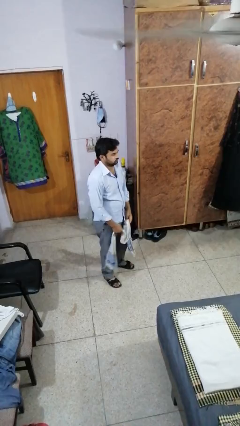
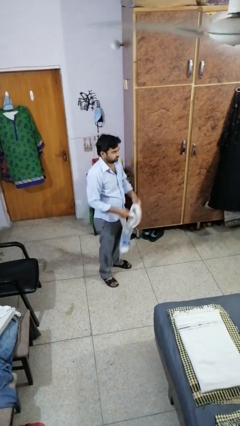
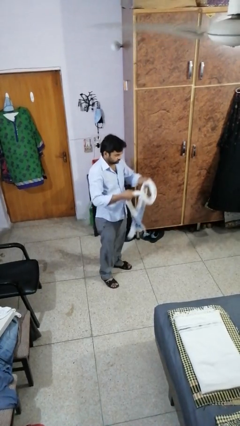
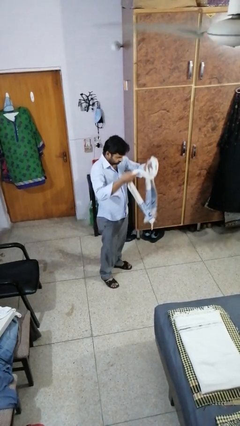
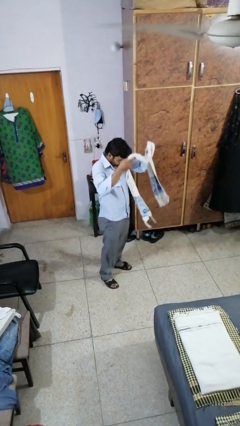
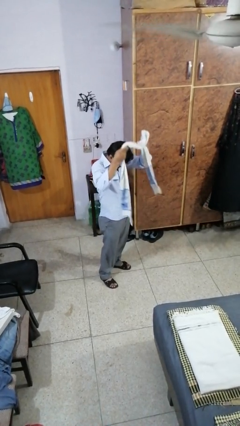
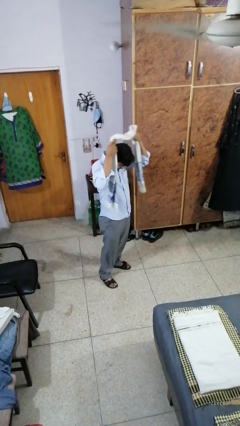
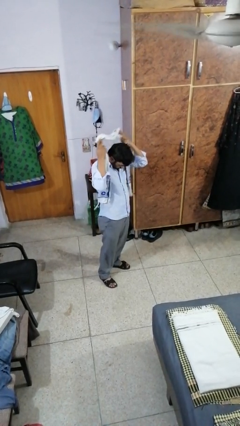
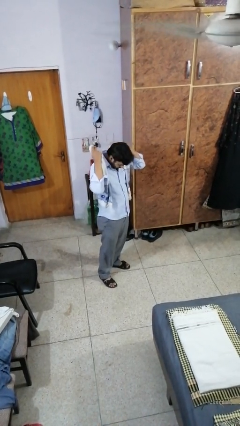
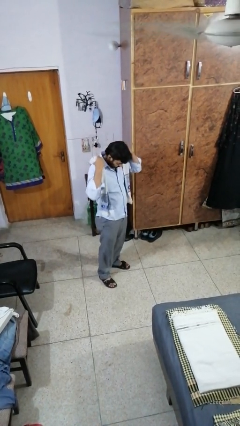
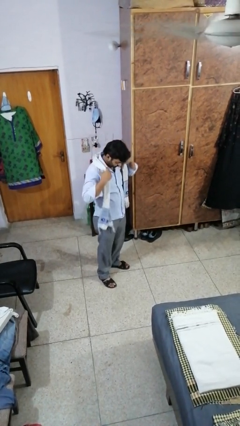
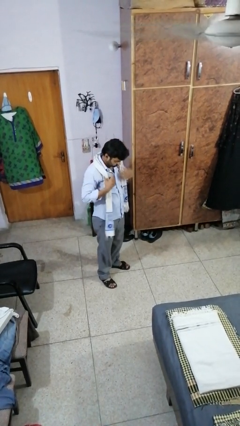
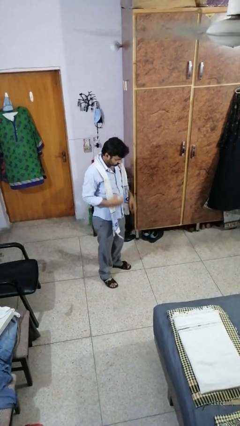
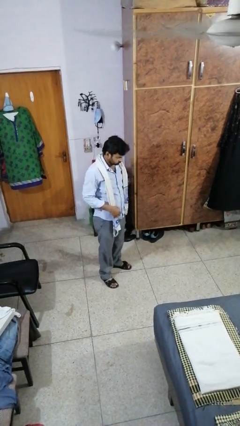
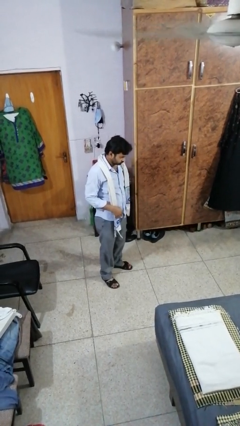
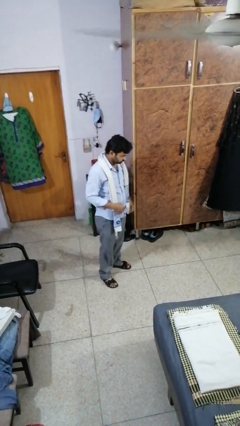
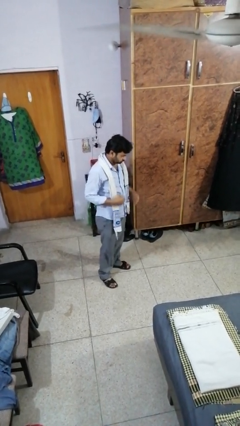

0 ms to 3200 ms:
person puts on scarf

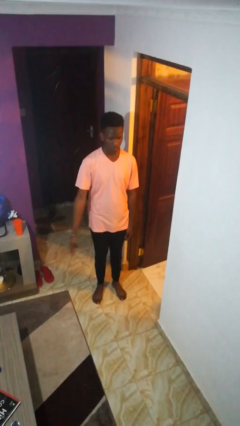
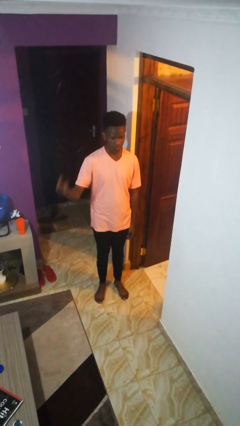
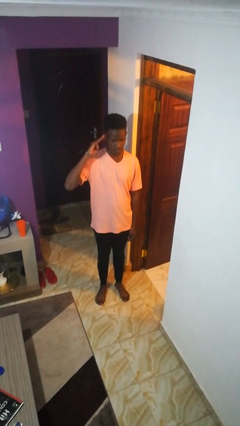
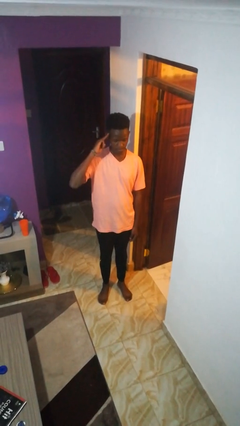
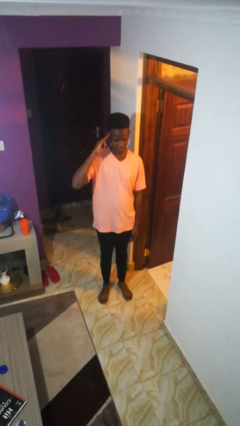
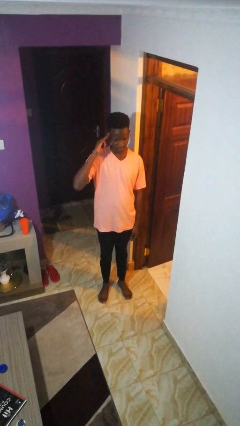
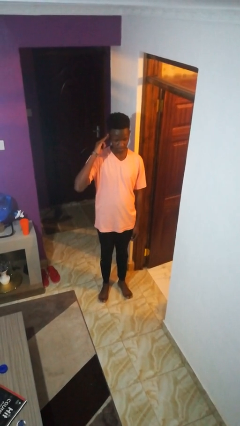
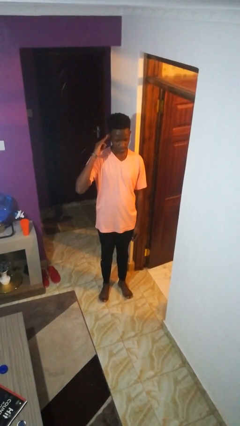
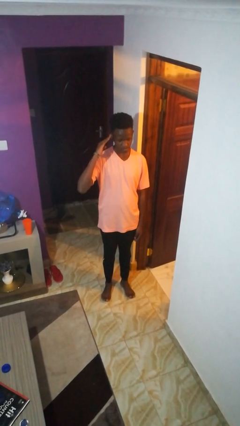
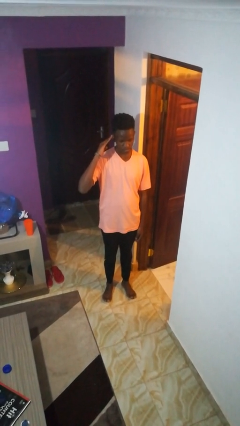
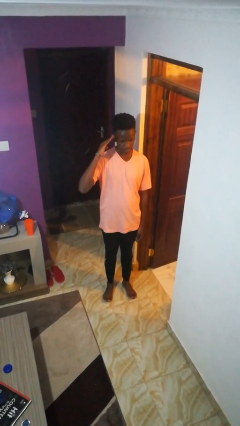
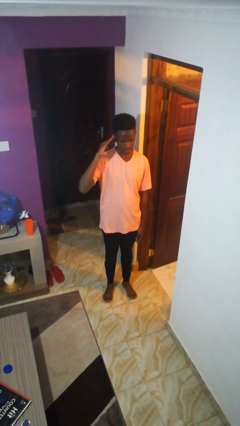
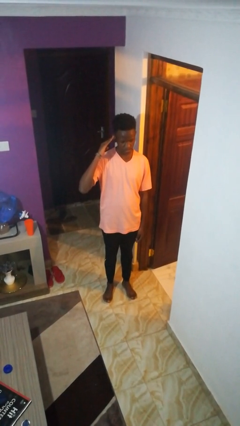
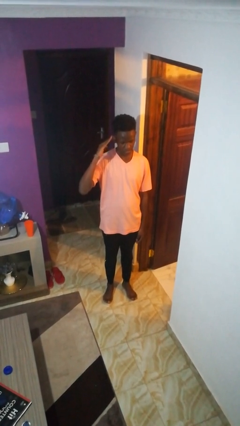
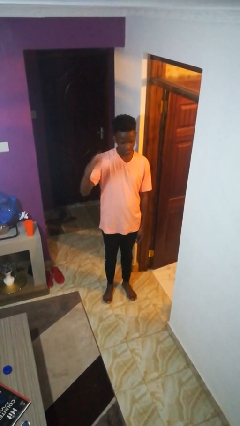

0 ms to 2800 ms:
person salutes

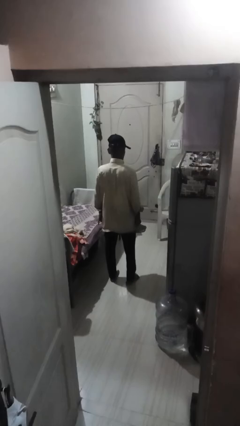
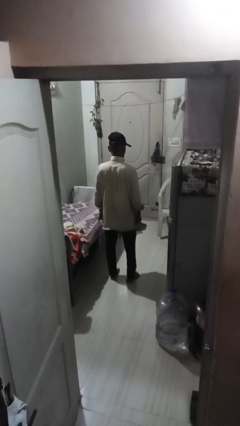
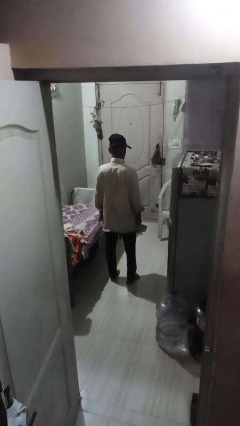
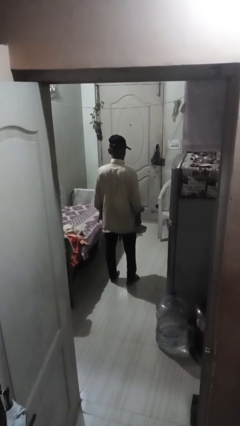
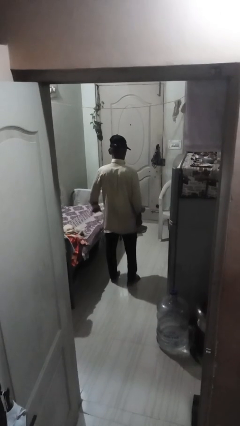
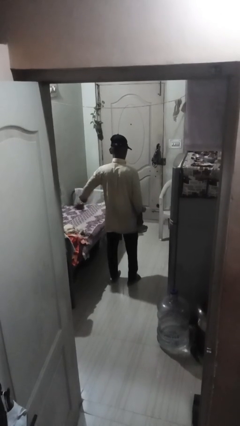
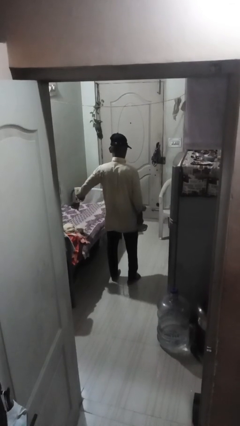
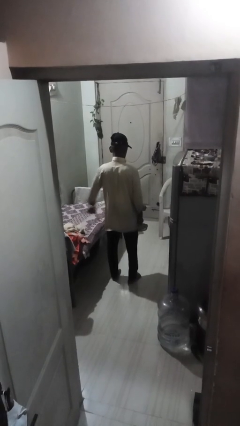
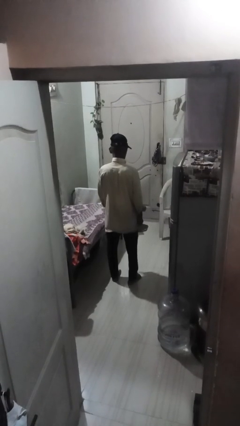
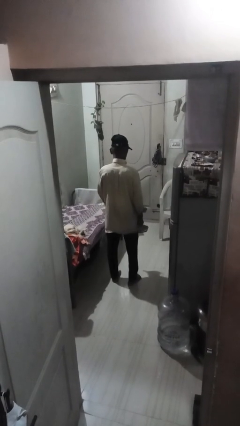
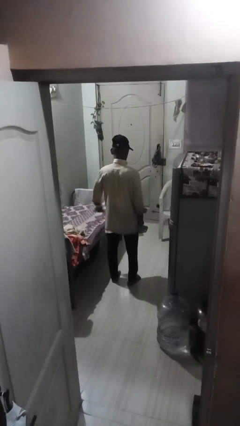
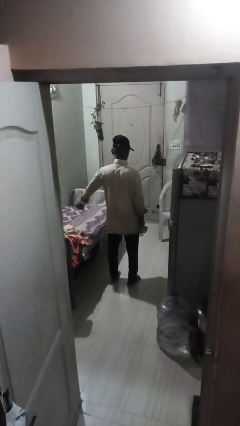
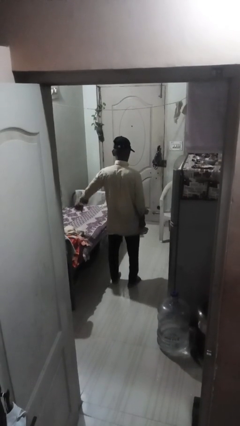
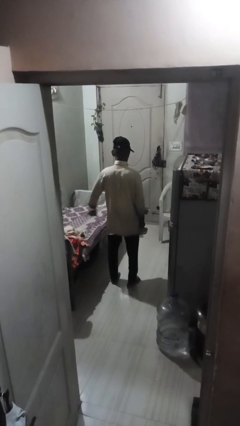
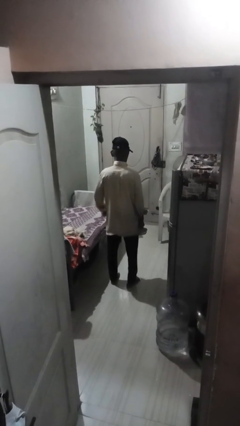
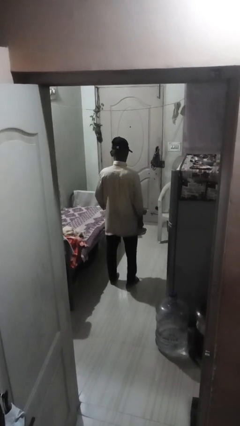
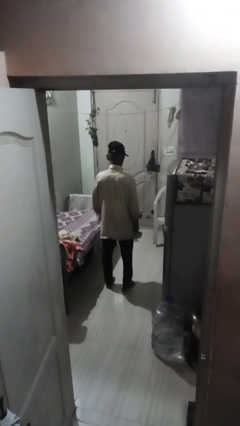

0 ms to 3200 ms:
person gestures hang loose

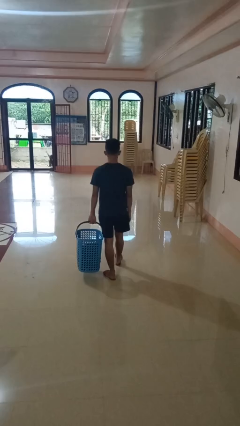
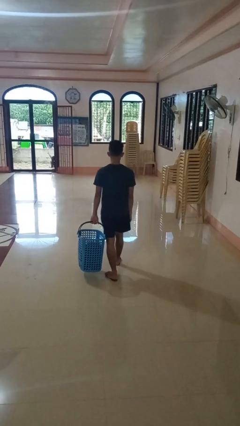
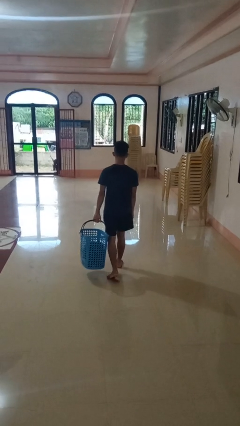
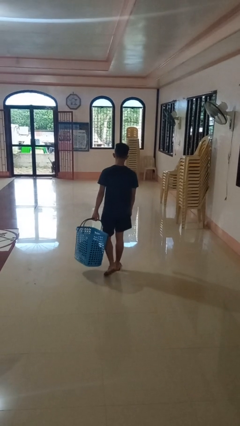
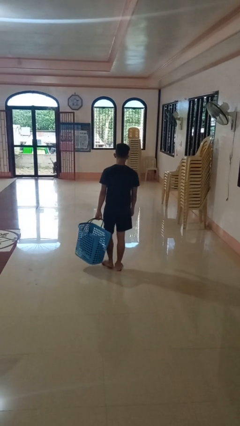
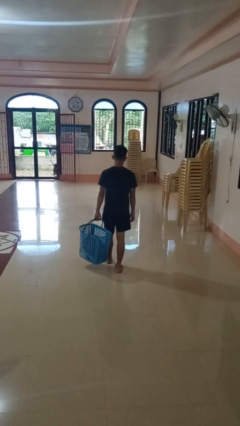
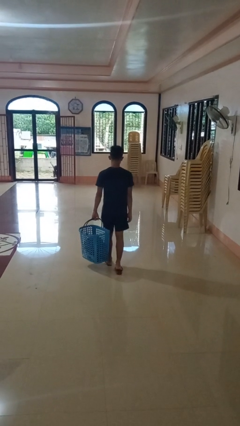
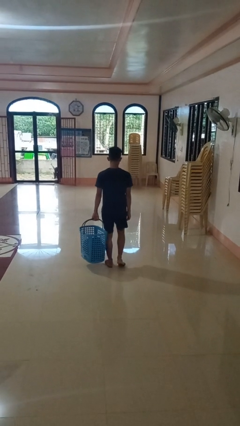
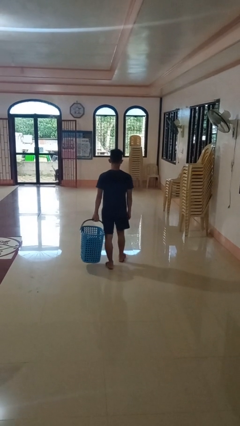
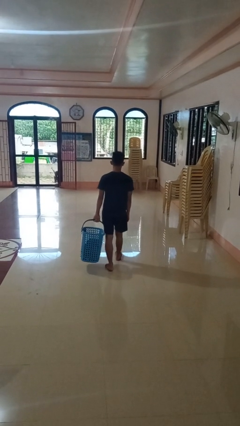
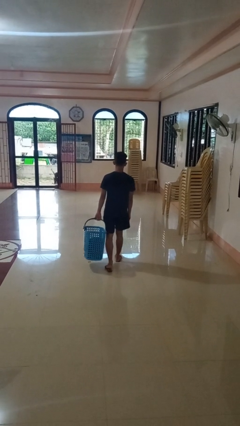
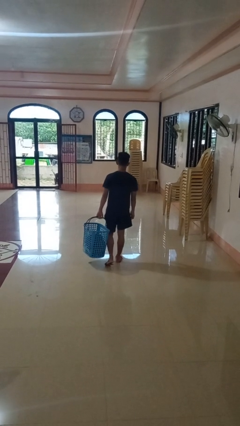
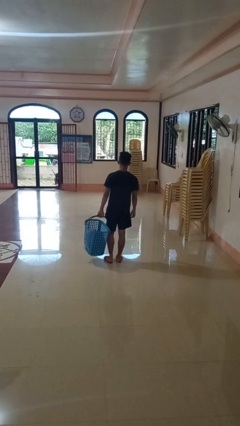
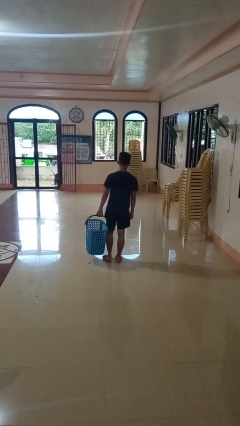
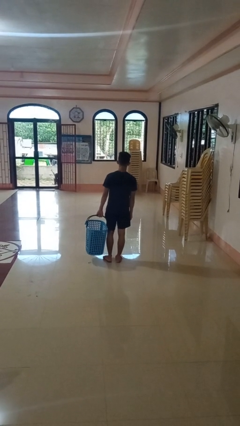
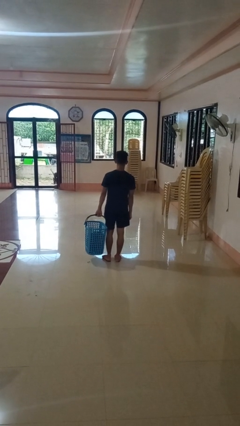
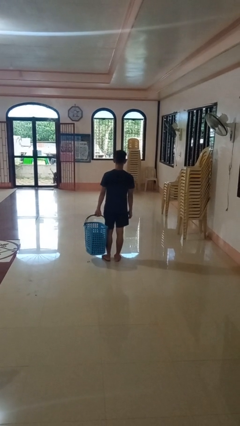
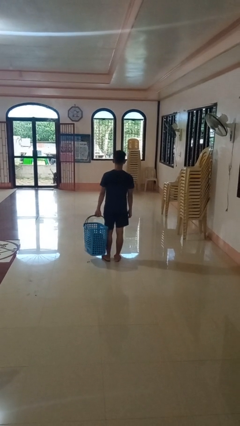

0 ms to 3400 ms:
person carries laundry basket

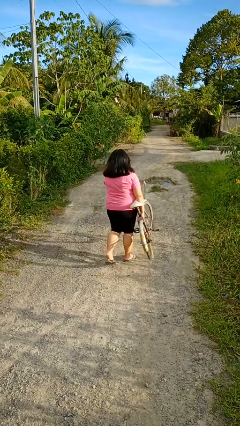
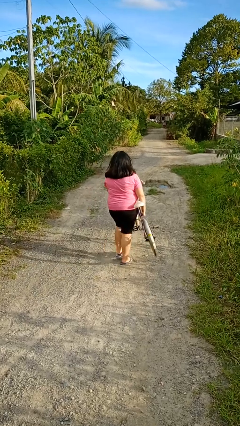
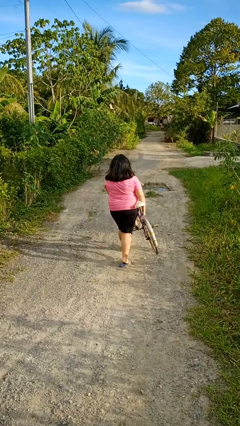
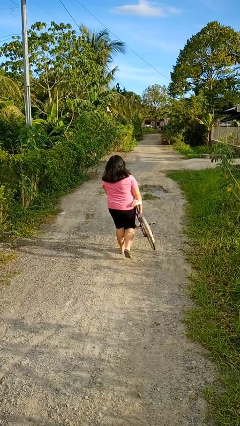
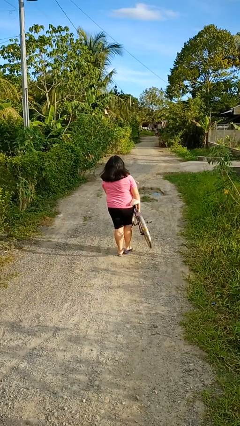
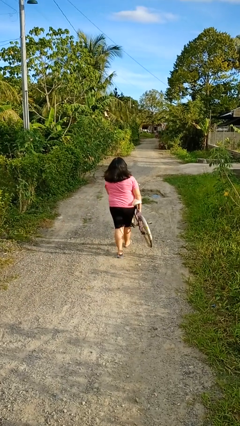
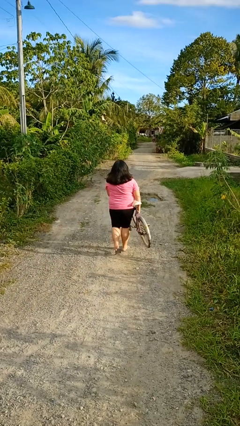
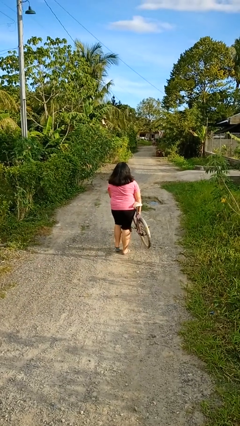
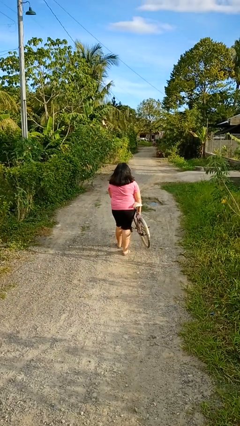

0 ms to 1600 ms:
person carries bicycle

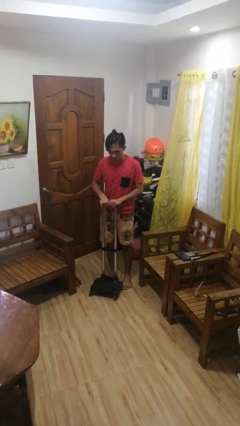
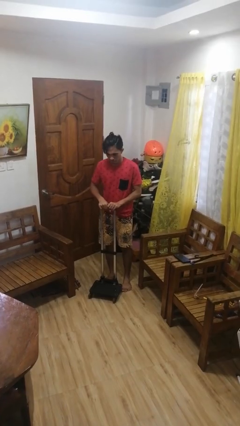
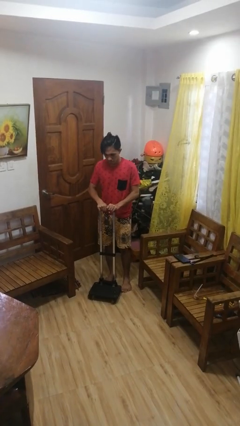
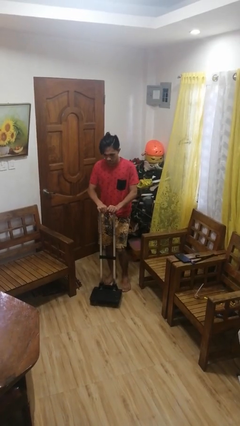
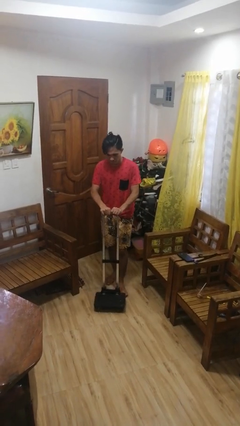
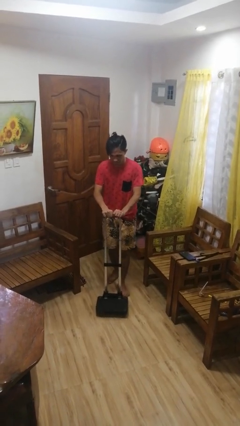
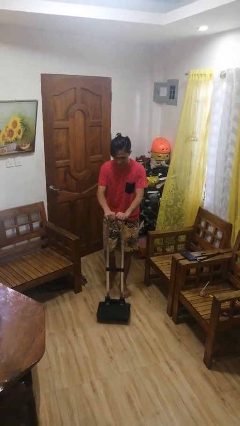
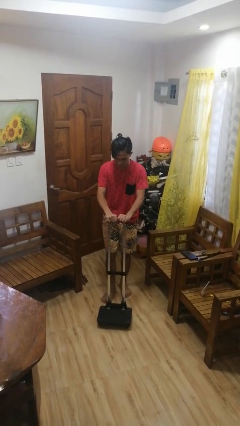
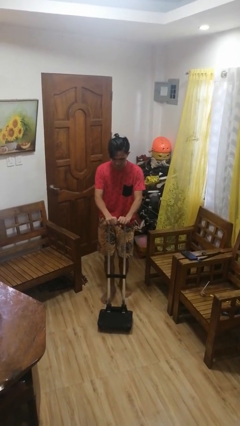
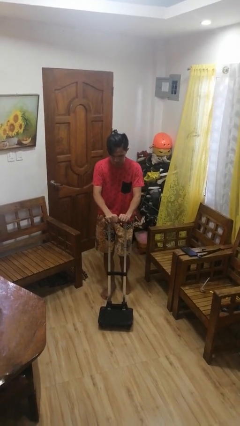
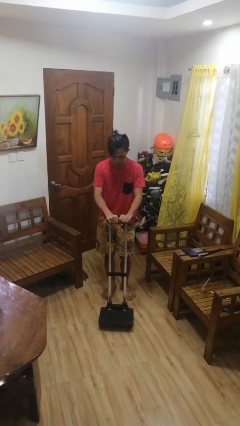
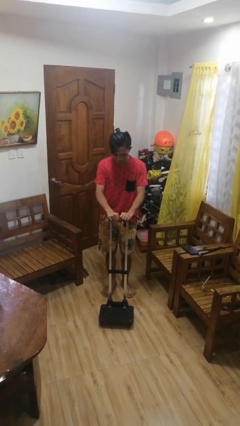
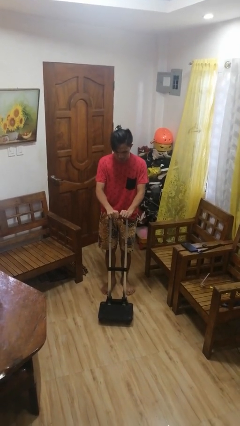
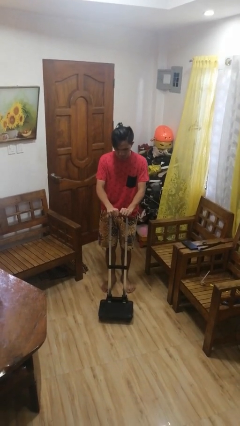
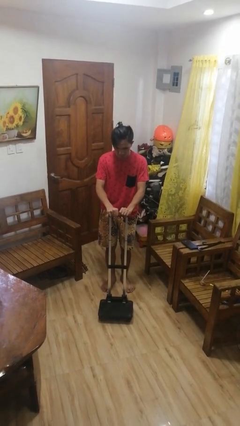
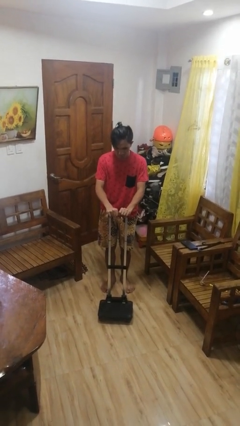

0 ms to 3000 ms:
person pushes wheeled cart
